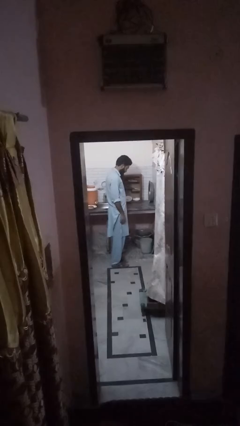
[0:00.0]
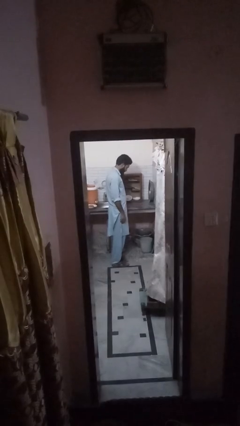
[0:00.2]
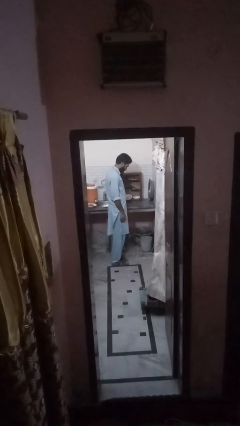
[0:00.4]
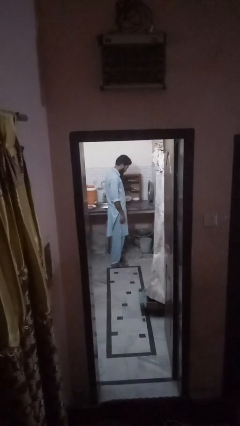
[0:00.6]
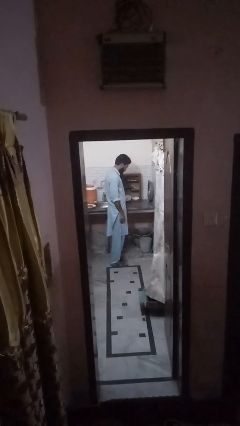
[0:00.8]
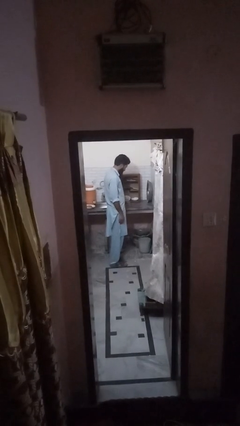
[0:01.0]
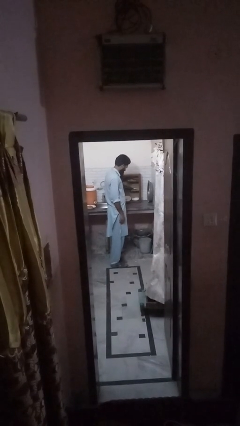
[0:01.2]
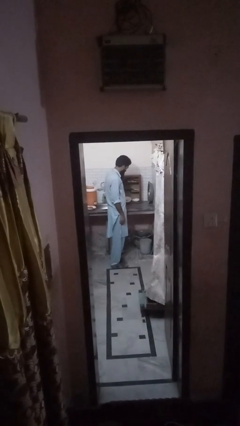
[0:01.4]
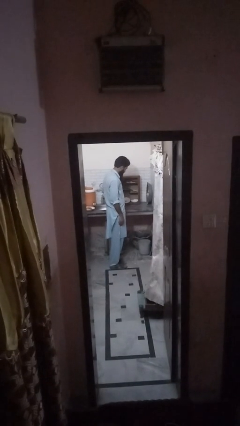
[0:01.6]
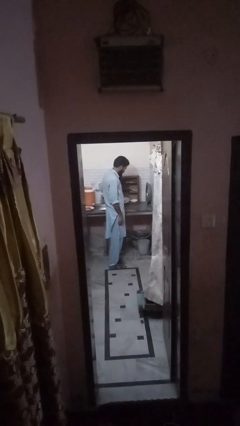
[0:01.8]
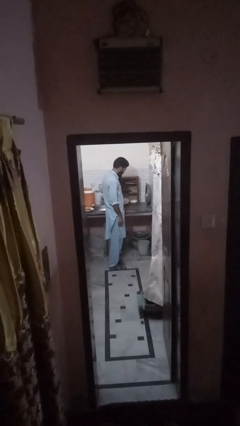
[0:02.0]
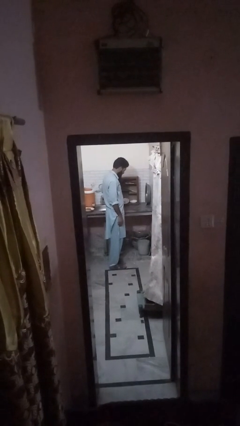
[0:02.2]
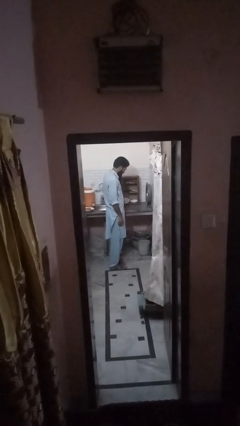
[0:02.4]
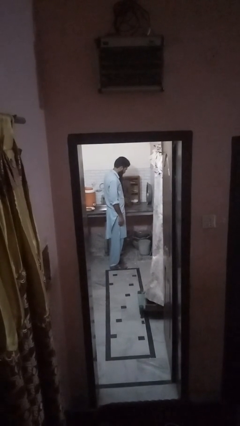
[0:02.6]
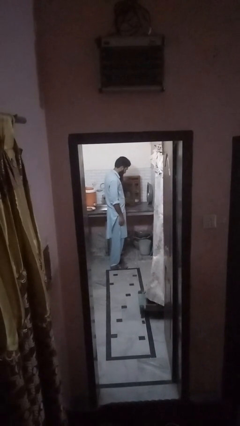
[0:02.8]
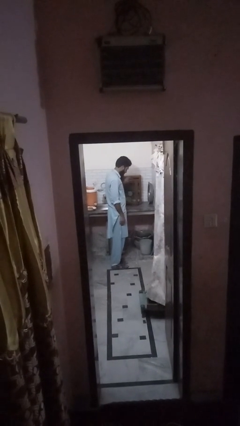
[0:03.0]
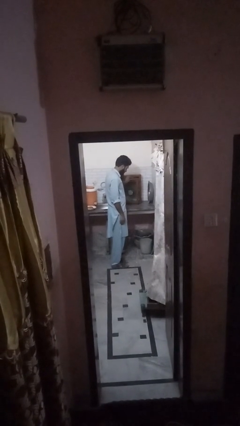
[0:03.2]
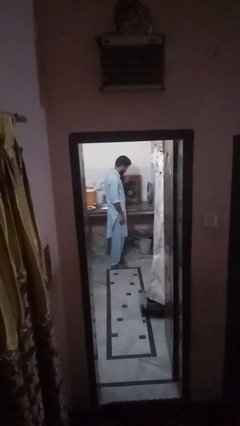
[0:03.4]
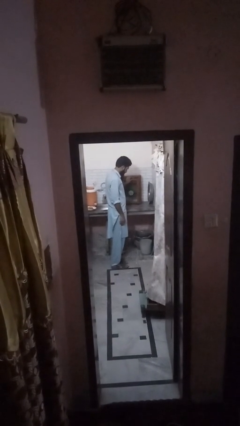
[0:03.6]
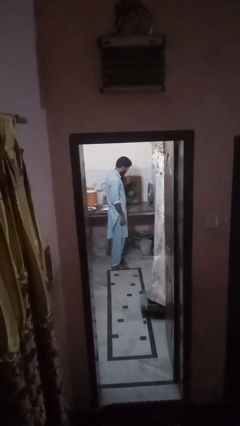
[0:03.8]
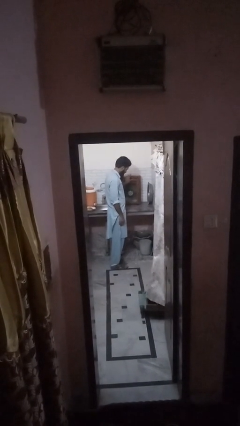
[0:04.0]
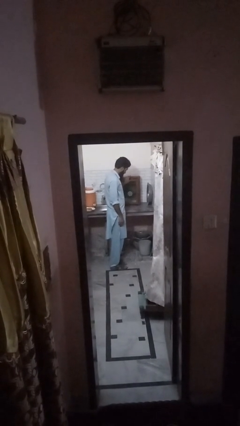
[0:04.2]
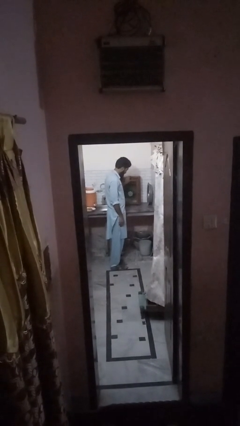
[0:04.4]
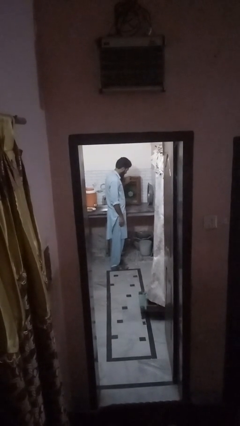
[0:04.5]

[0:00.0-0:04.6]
person closes cabinet

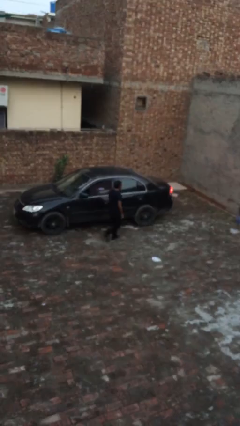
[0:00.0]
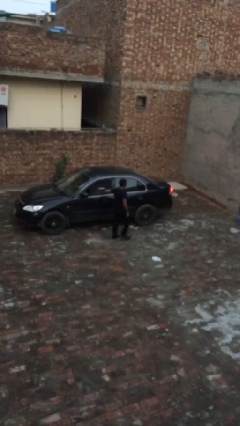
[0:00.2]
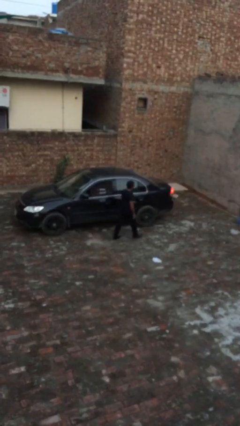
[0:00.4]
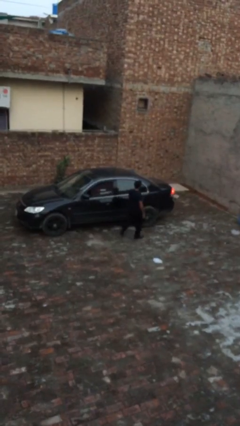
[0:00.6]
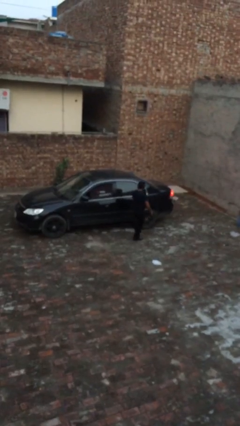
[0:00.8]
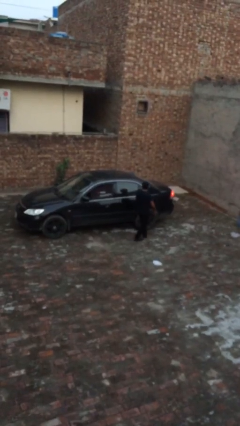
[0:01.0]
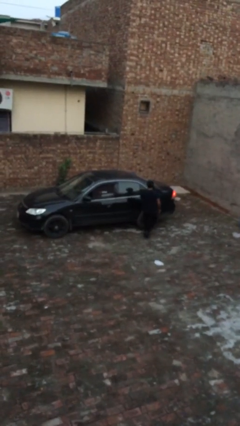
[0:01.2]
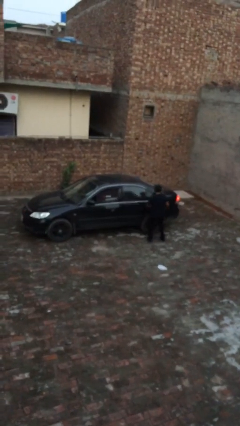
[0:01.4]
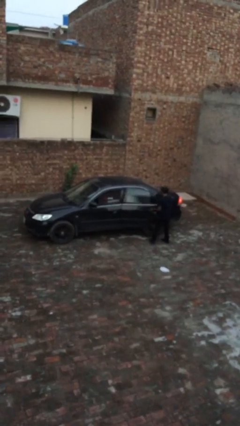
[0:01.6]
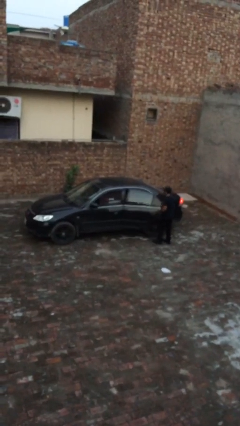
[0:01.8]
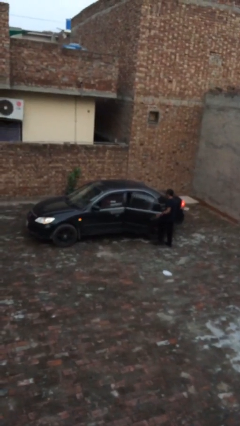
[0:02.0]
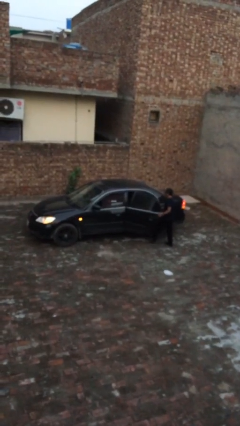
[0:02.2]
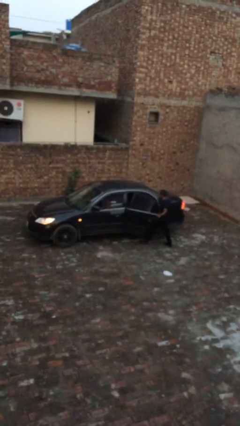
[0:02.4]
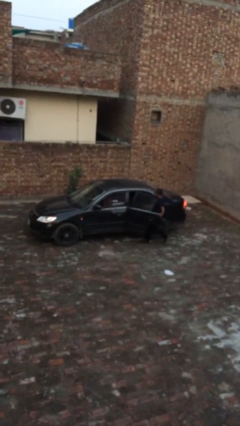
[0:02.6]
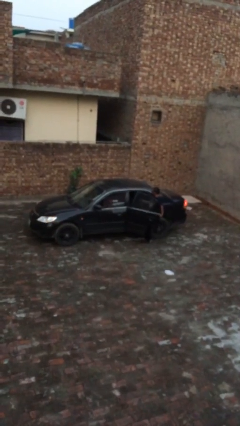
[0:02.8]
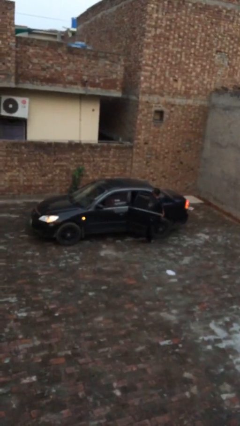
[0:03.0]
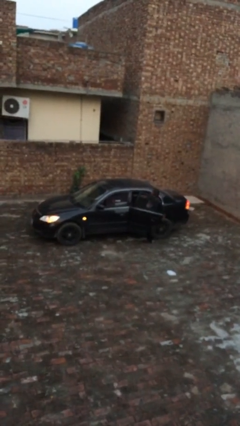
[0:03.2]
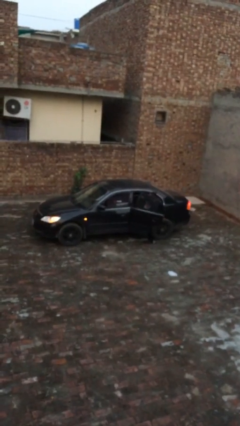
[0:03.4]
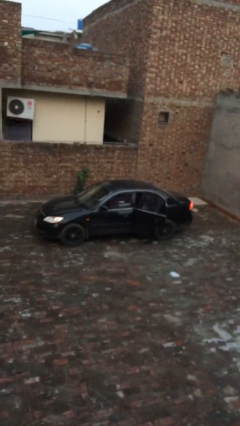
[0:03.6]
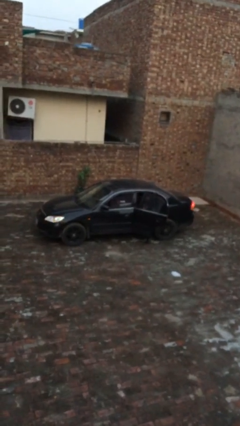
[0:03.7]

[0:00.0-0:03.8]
car picks up person

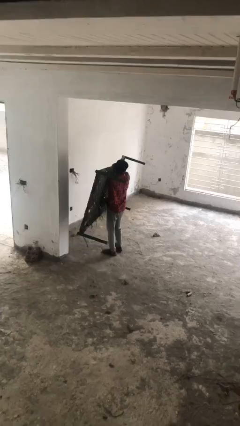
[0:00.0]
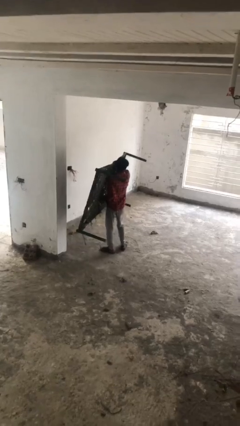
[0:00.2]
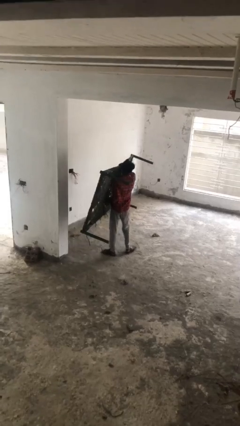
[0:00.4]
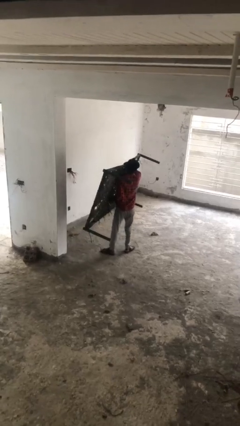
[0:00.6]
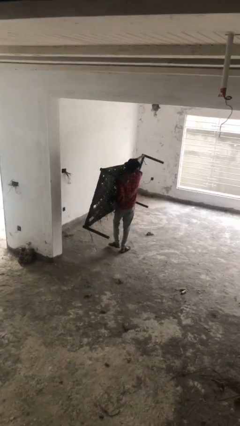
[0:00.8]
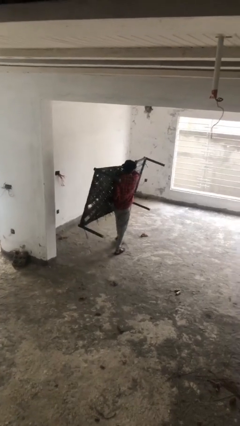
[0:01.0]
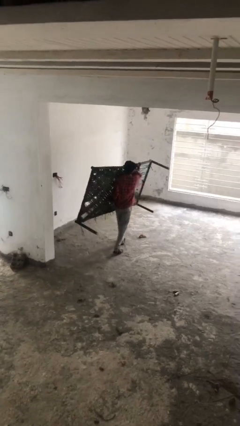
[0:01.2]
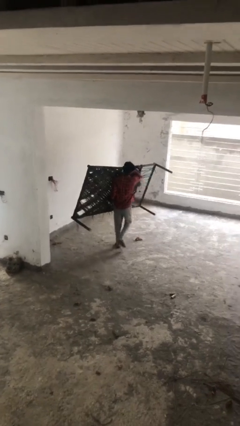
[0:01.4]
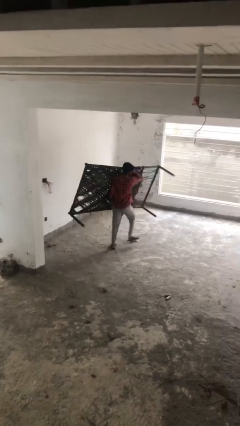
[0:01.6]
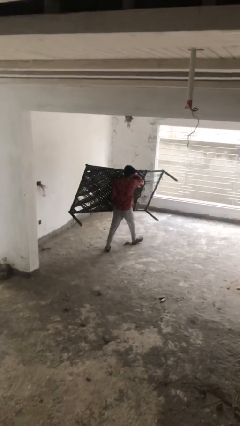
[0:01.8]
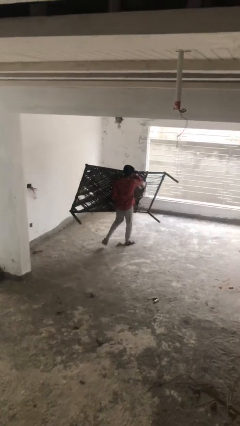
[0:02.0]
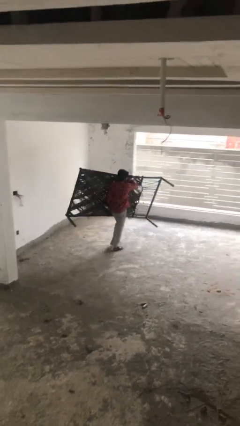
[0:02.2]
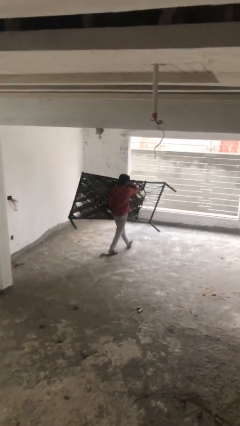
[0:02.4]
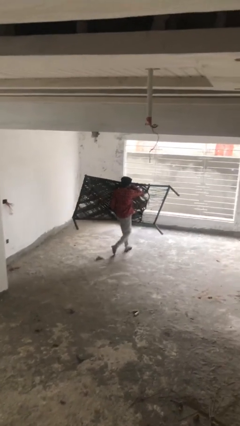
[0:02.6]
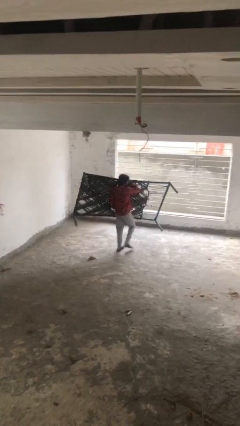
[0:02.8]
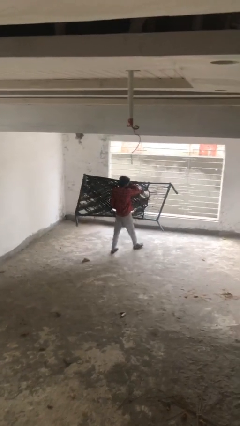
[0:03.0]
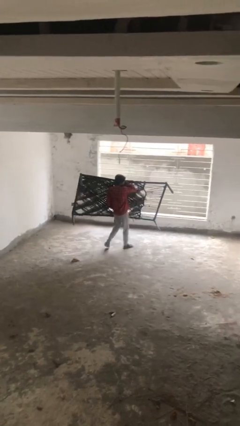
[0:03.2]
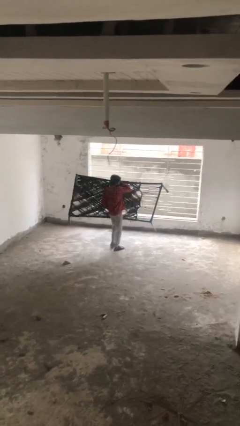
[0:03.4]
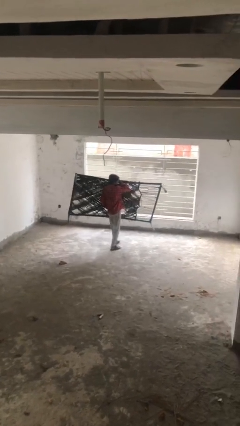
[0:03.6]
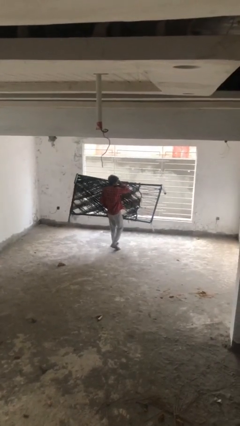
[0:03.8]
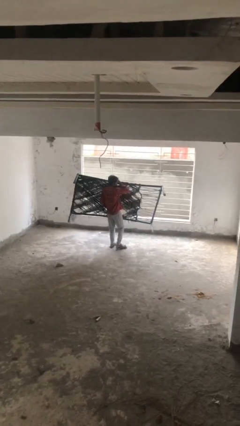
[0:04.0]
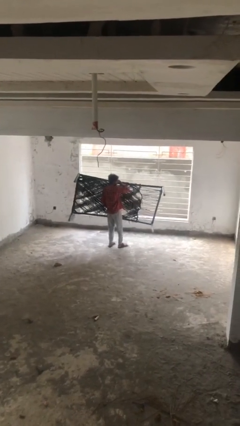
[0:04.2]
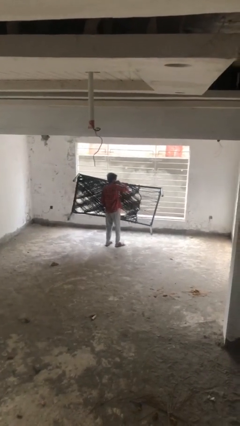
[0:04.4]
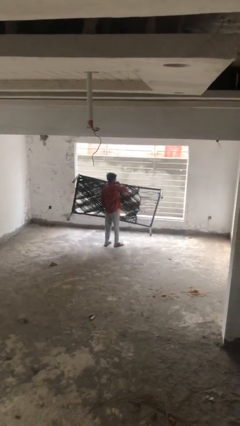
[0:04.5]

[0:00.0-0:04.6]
person carries heavy object

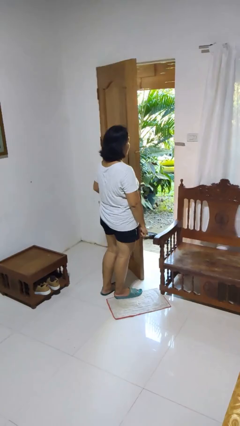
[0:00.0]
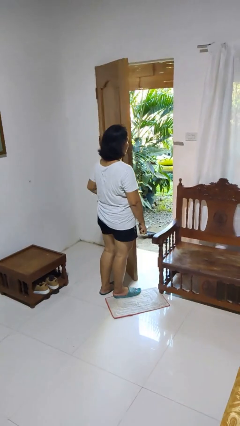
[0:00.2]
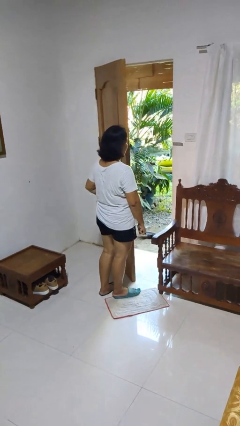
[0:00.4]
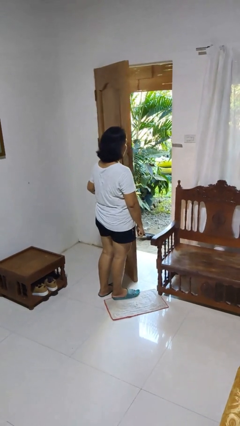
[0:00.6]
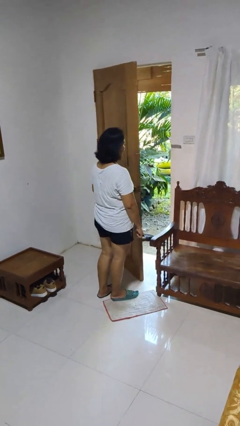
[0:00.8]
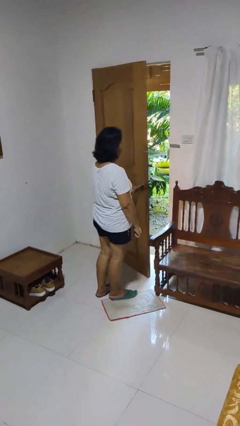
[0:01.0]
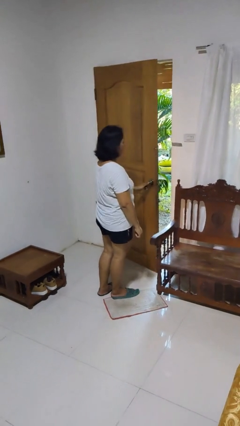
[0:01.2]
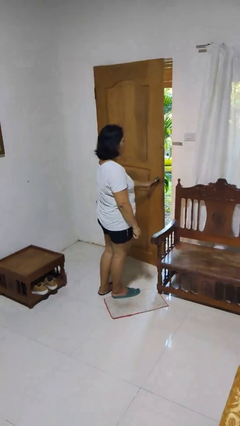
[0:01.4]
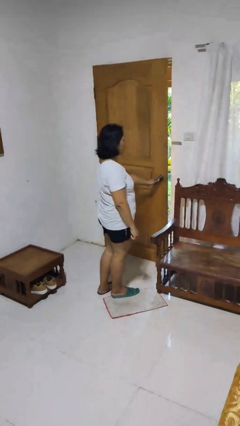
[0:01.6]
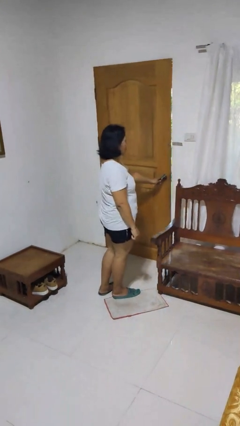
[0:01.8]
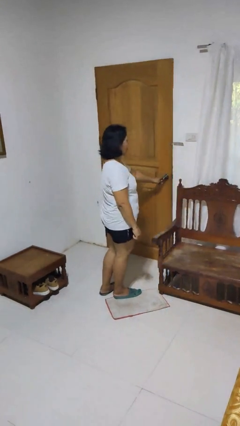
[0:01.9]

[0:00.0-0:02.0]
person closes facility door

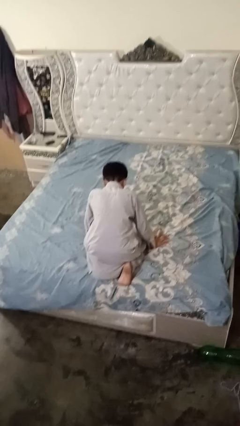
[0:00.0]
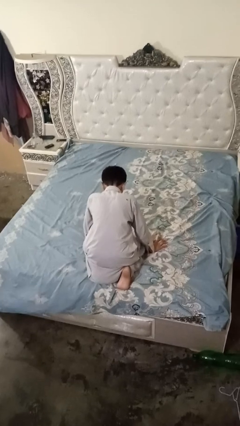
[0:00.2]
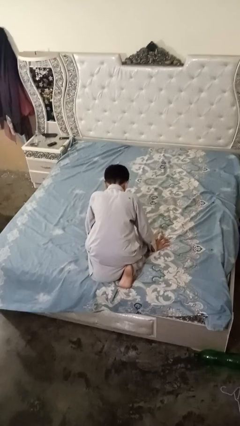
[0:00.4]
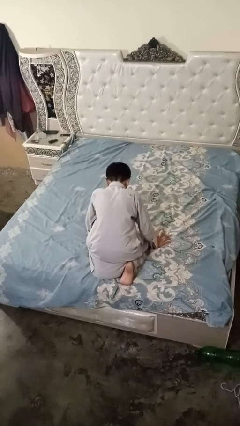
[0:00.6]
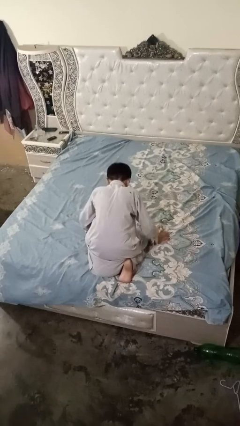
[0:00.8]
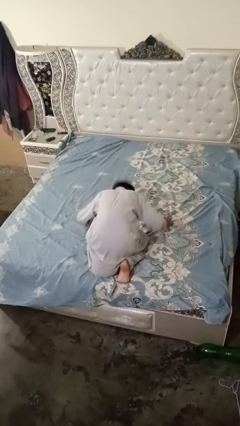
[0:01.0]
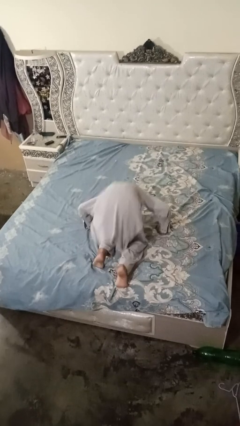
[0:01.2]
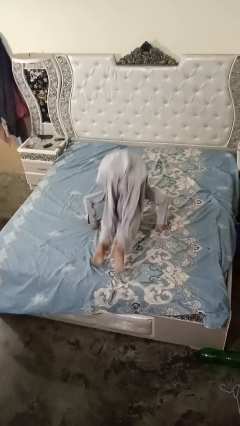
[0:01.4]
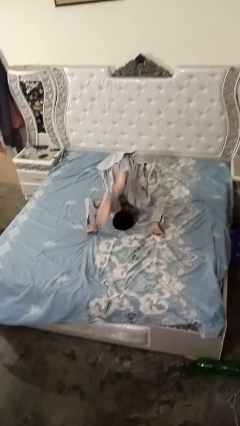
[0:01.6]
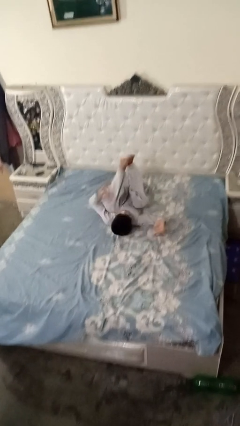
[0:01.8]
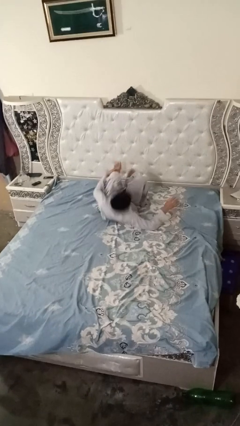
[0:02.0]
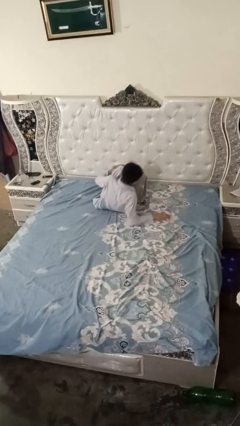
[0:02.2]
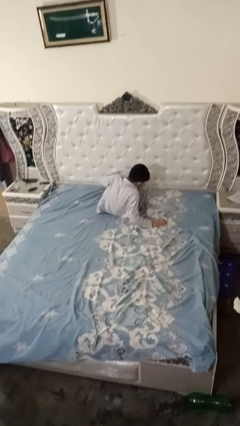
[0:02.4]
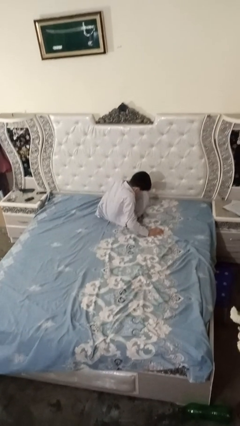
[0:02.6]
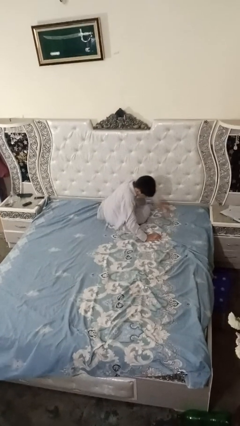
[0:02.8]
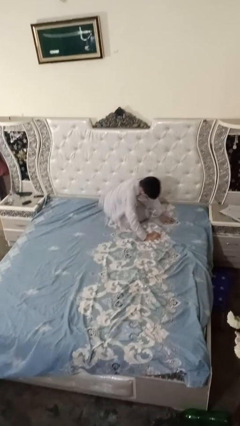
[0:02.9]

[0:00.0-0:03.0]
person somersaults
